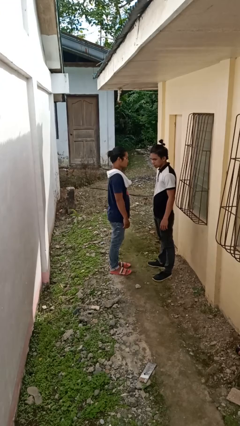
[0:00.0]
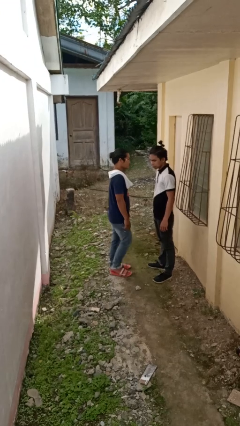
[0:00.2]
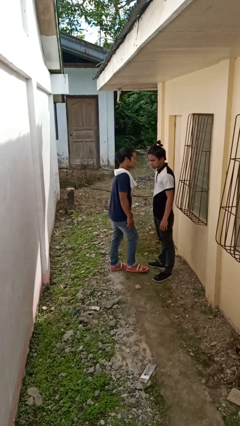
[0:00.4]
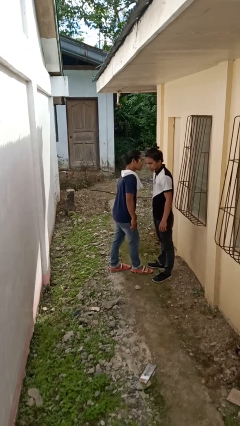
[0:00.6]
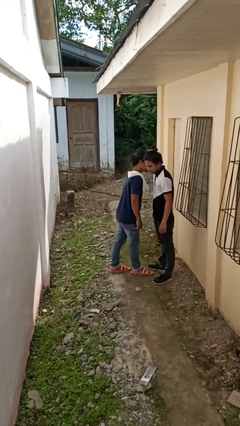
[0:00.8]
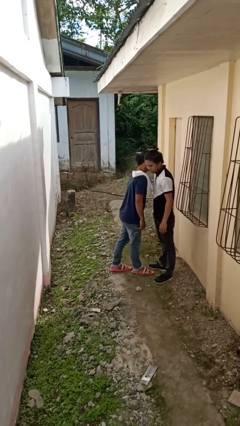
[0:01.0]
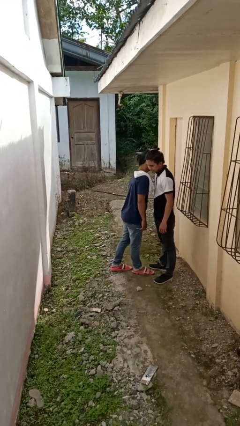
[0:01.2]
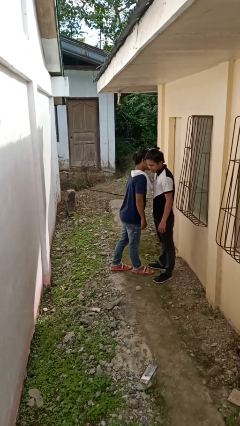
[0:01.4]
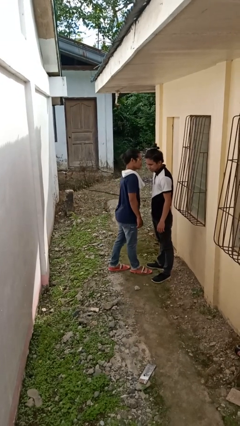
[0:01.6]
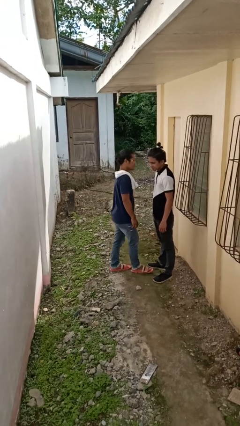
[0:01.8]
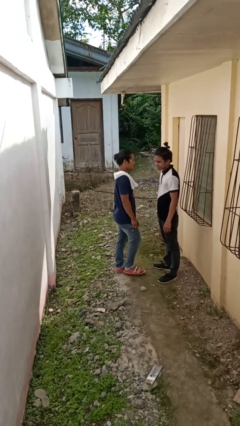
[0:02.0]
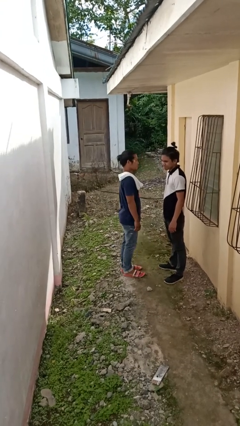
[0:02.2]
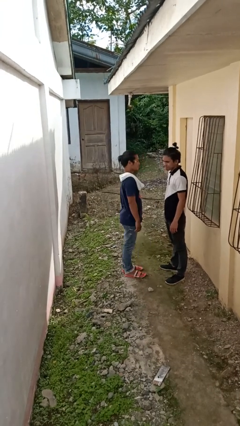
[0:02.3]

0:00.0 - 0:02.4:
person kisses cheek of person

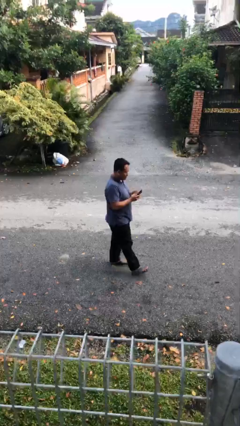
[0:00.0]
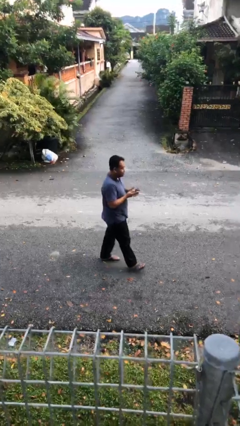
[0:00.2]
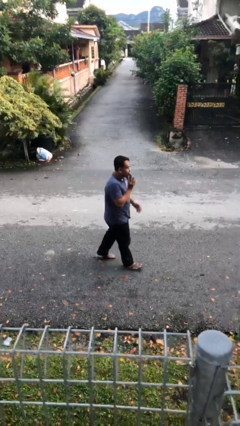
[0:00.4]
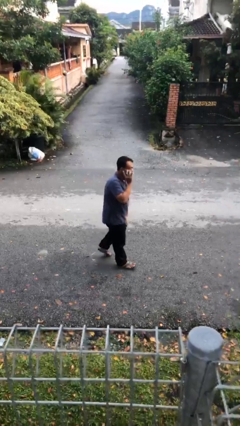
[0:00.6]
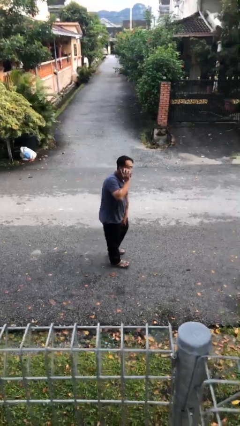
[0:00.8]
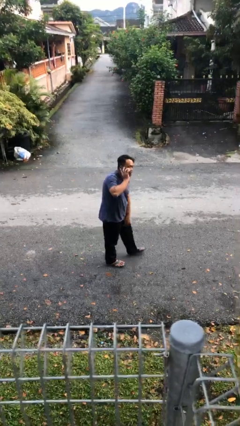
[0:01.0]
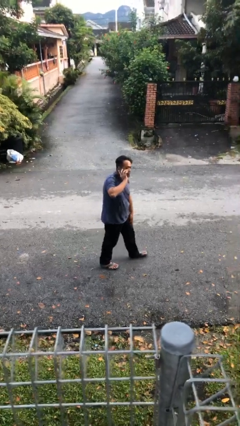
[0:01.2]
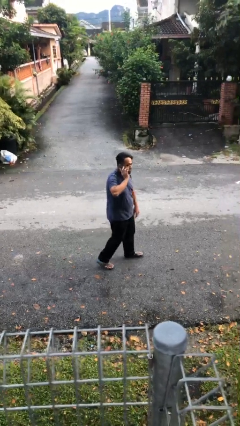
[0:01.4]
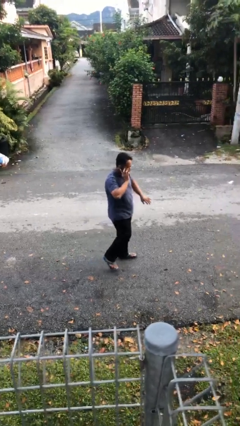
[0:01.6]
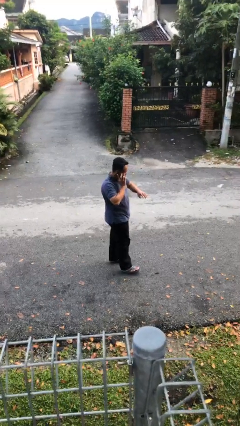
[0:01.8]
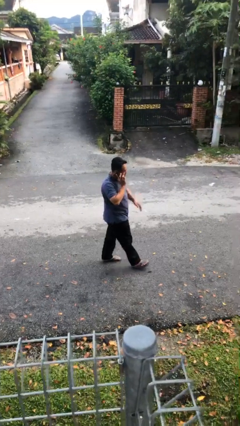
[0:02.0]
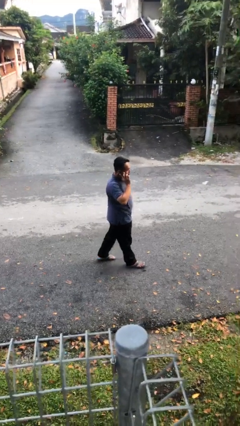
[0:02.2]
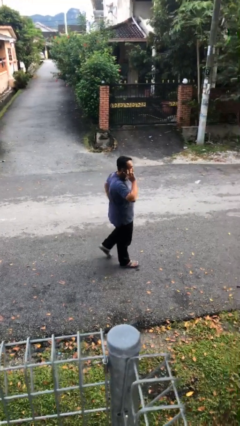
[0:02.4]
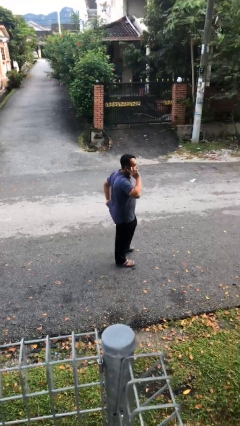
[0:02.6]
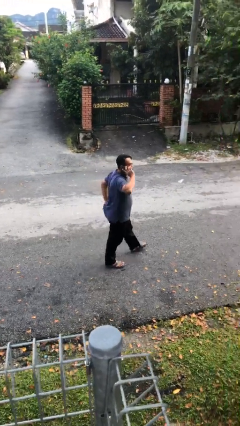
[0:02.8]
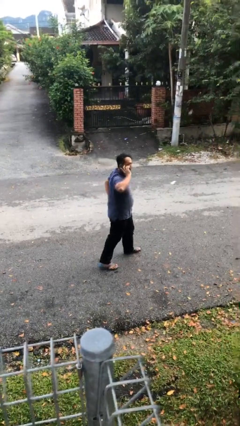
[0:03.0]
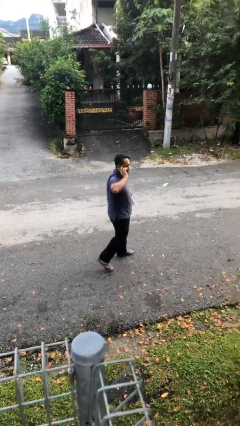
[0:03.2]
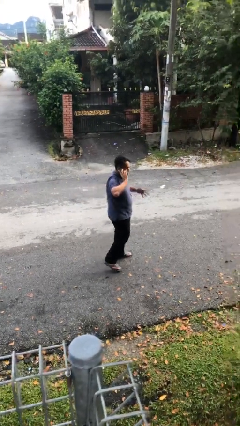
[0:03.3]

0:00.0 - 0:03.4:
person talks on phone

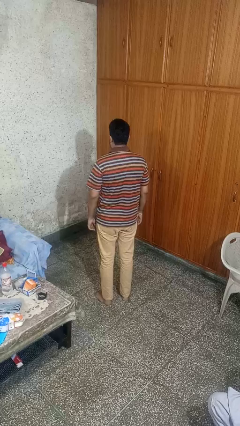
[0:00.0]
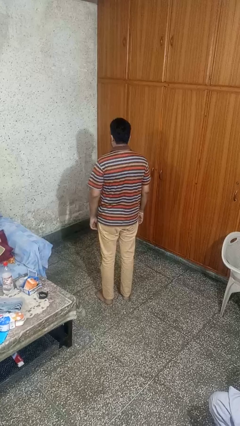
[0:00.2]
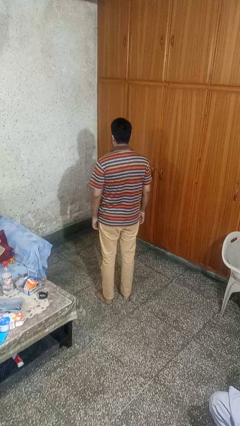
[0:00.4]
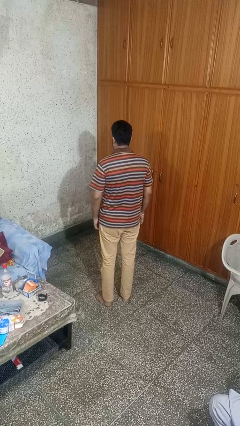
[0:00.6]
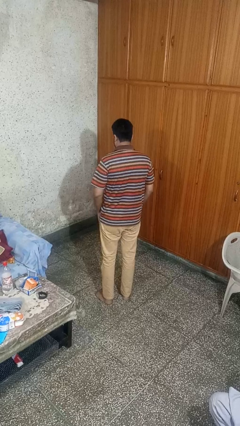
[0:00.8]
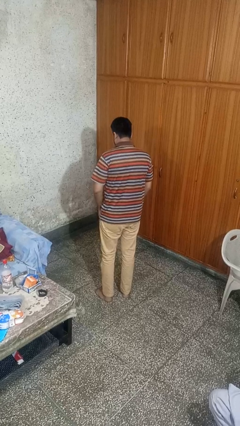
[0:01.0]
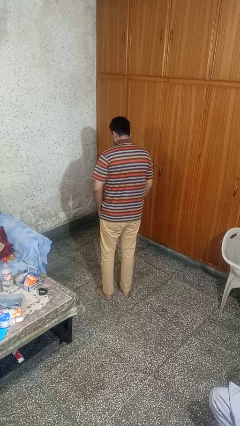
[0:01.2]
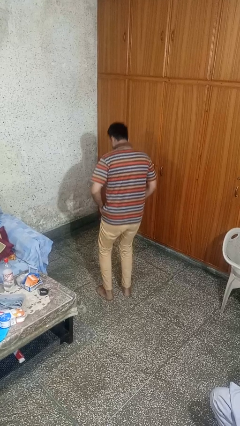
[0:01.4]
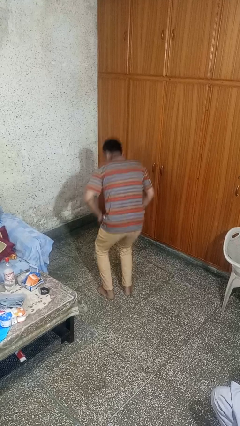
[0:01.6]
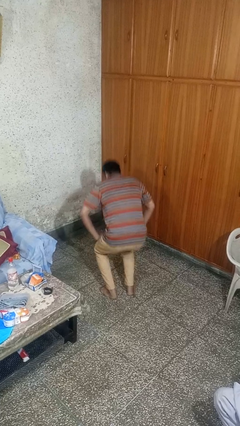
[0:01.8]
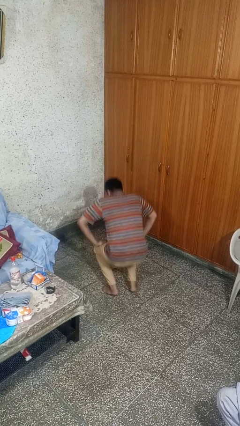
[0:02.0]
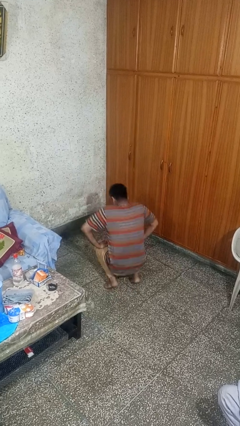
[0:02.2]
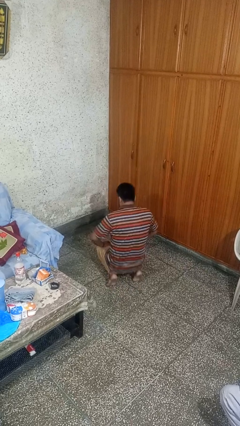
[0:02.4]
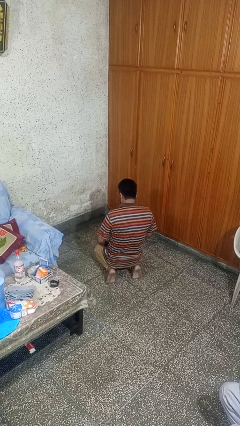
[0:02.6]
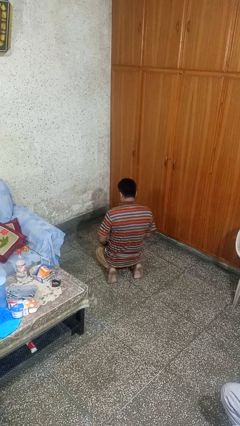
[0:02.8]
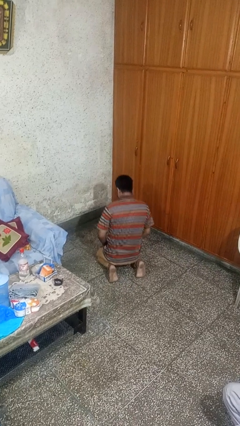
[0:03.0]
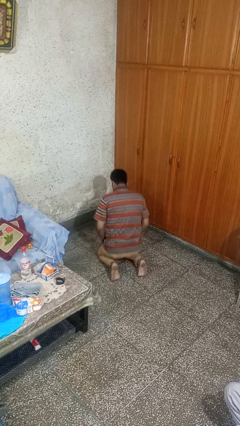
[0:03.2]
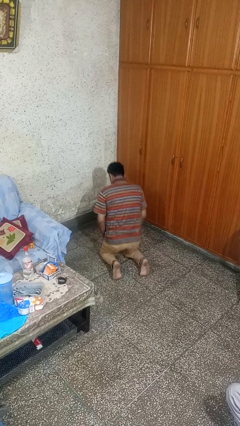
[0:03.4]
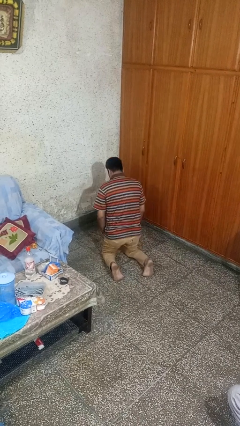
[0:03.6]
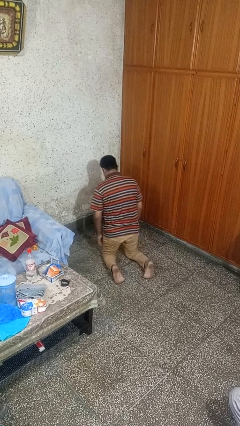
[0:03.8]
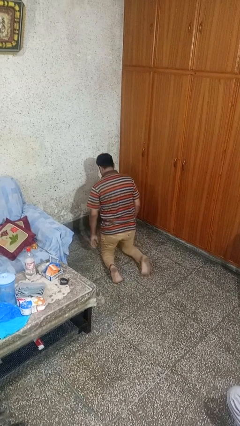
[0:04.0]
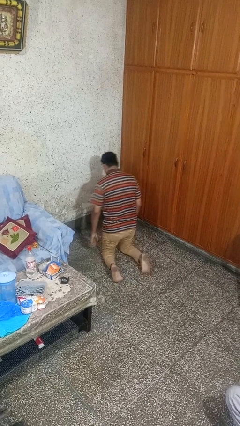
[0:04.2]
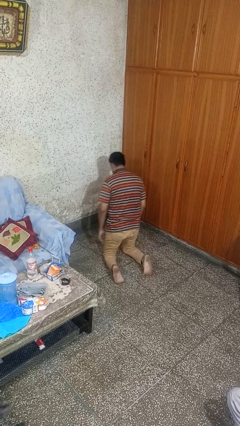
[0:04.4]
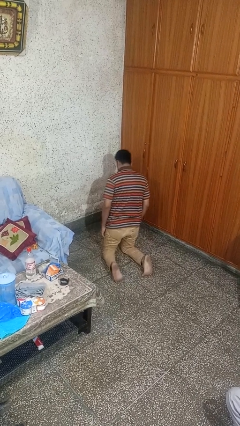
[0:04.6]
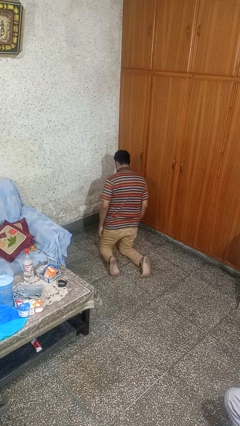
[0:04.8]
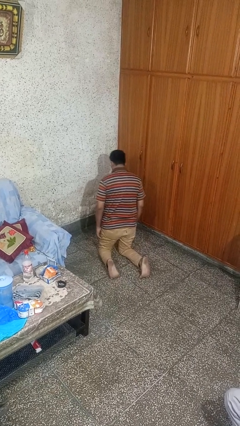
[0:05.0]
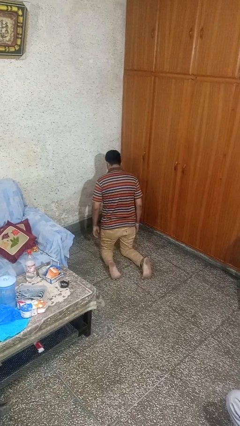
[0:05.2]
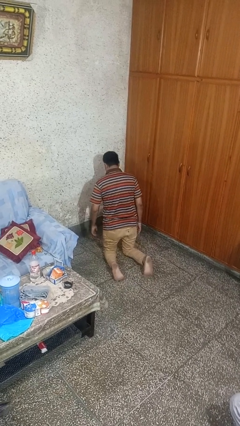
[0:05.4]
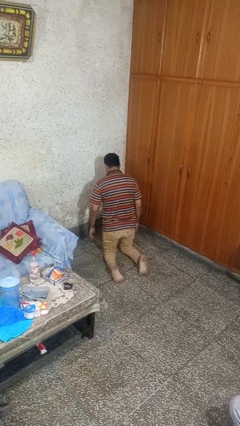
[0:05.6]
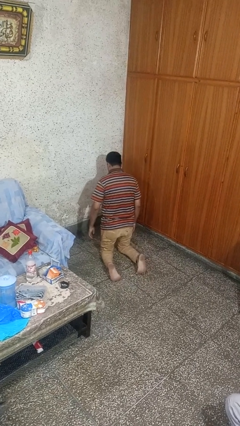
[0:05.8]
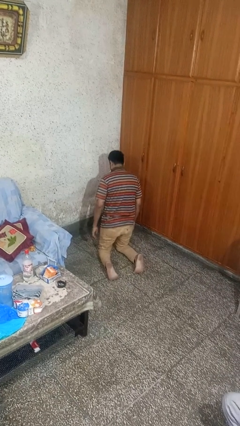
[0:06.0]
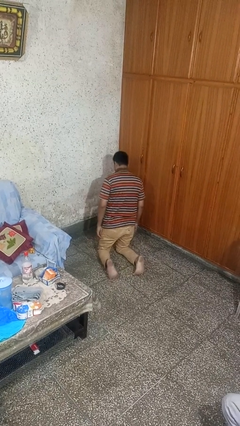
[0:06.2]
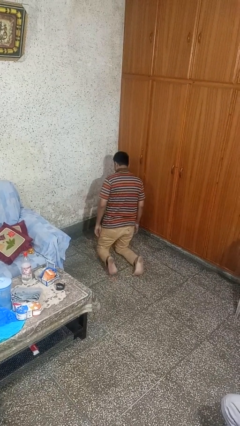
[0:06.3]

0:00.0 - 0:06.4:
person exercises with lunges

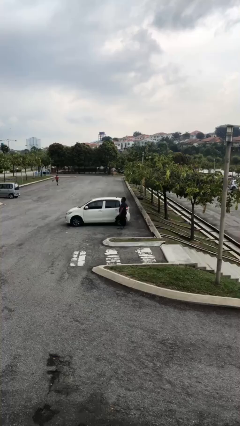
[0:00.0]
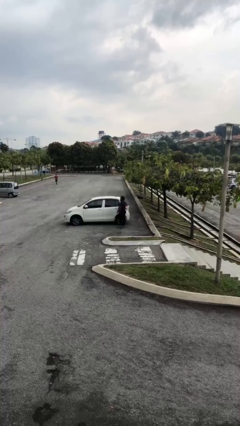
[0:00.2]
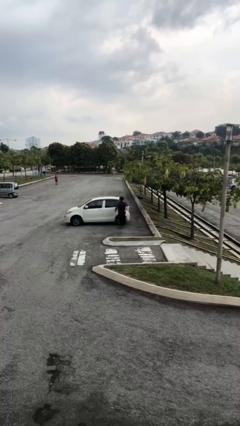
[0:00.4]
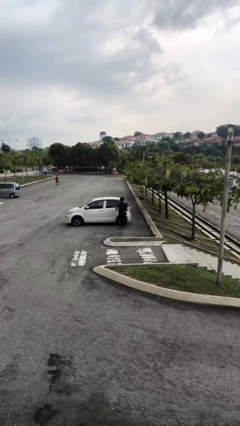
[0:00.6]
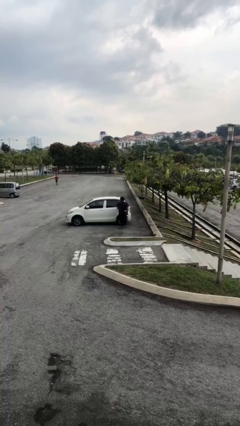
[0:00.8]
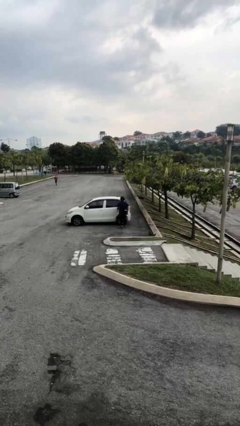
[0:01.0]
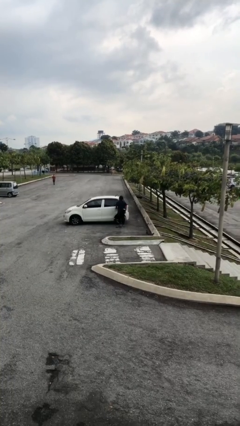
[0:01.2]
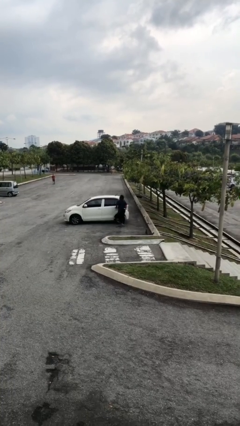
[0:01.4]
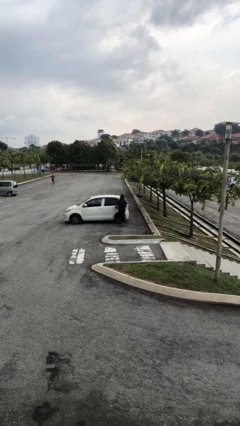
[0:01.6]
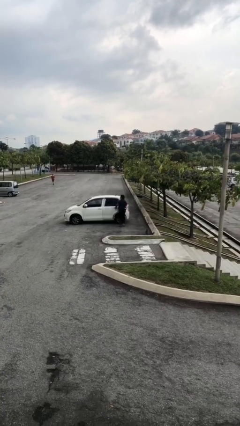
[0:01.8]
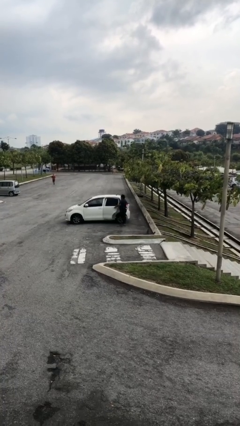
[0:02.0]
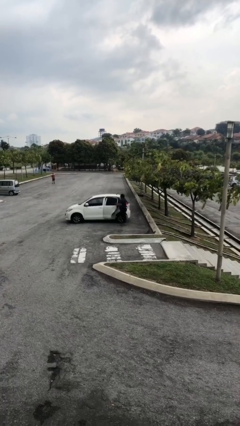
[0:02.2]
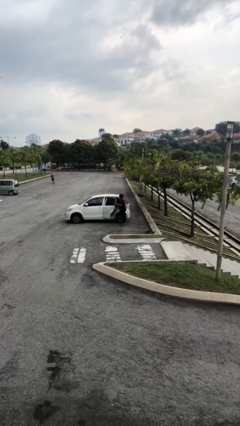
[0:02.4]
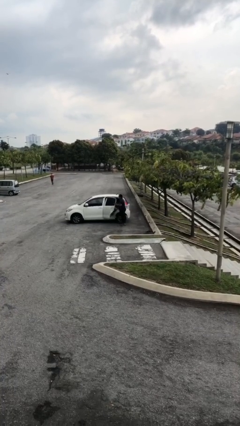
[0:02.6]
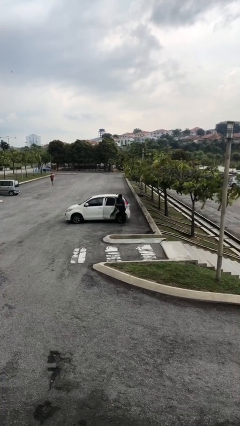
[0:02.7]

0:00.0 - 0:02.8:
person opens car door

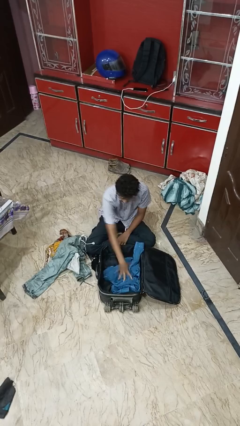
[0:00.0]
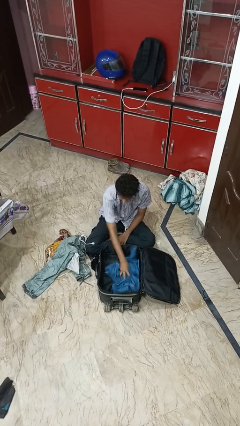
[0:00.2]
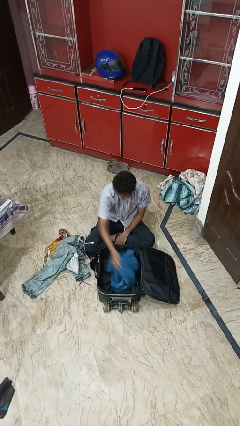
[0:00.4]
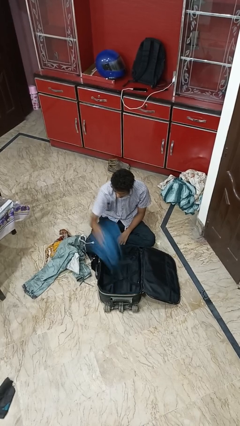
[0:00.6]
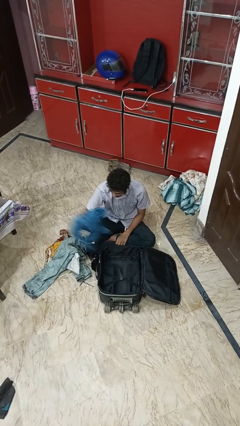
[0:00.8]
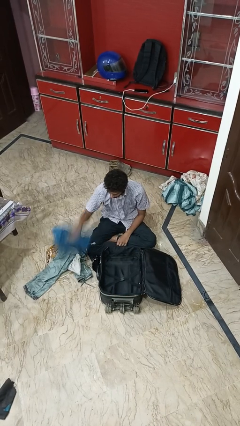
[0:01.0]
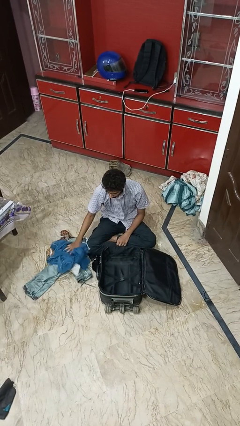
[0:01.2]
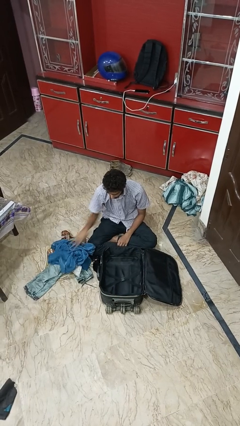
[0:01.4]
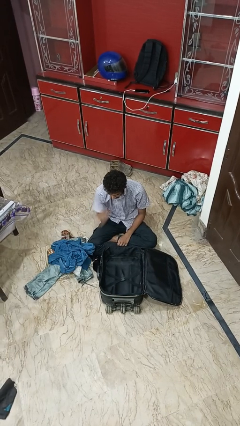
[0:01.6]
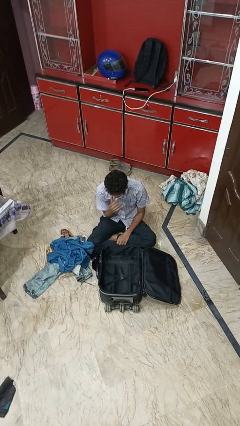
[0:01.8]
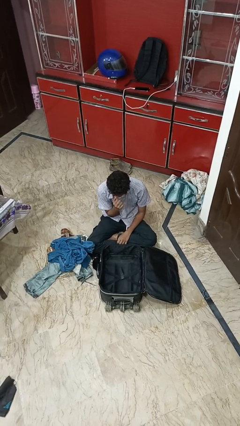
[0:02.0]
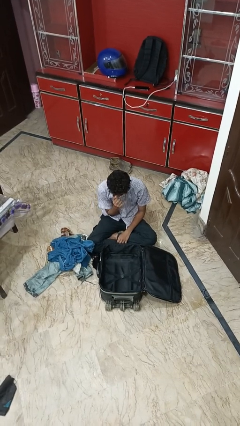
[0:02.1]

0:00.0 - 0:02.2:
person unloads clothes from suitcase

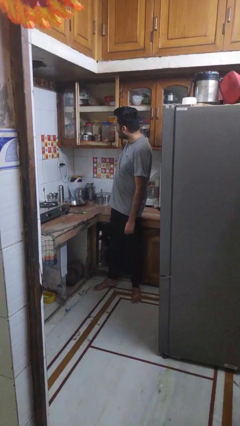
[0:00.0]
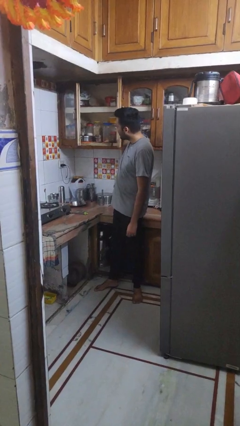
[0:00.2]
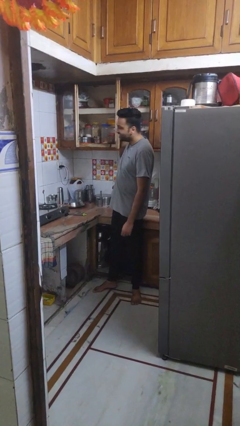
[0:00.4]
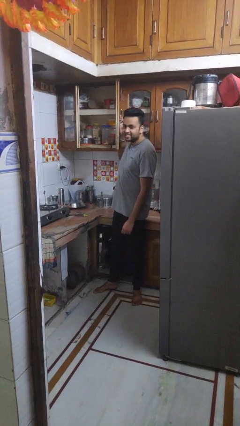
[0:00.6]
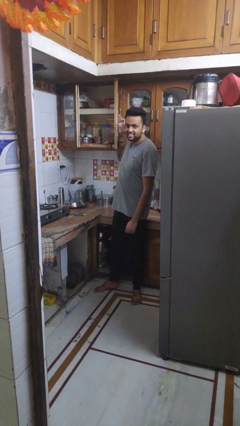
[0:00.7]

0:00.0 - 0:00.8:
person opens cabinet
